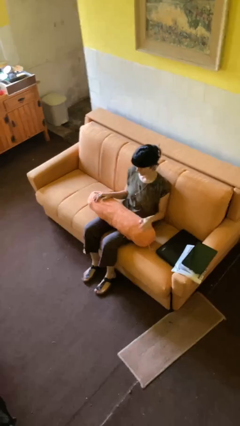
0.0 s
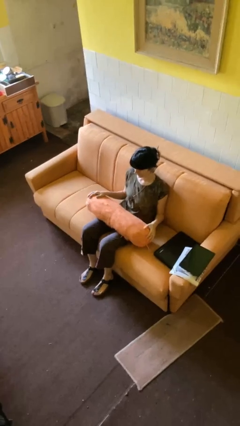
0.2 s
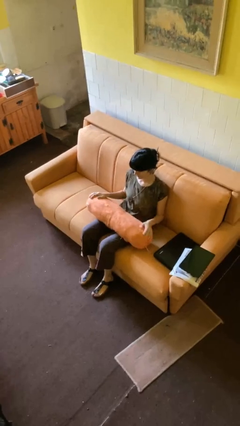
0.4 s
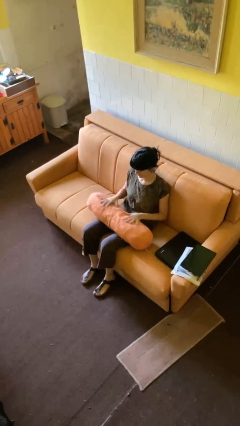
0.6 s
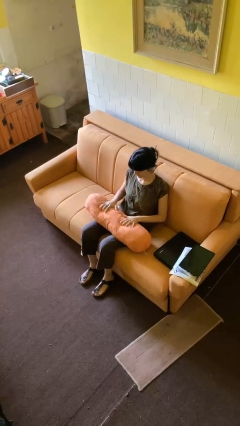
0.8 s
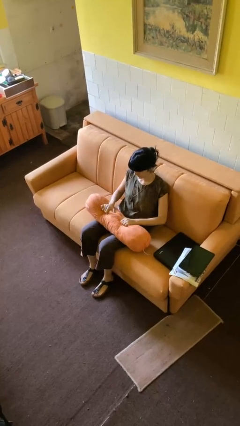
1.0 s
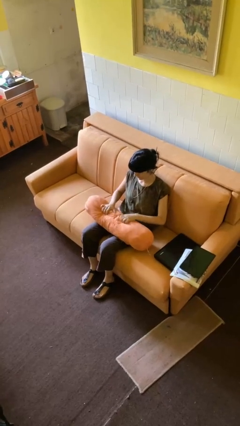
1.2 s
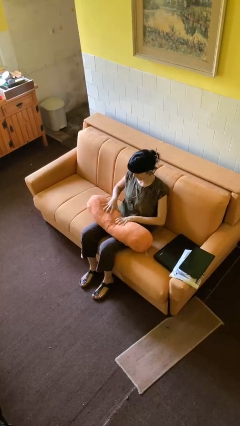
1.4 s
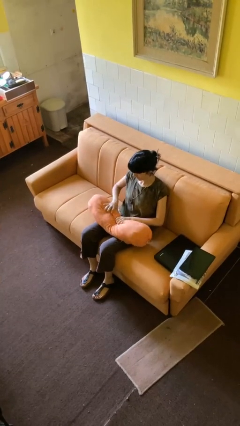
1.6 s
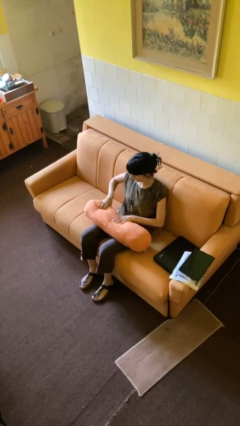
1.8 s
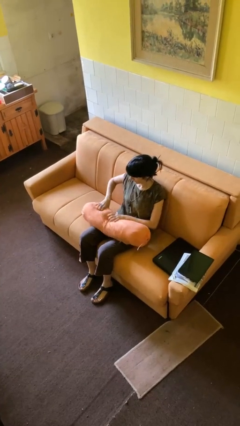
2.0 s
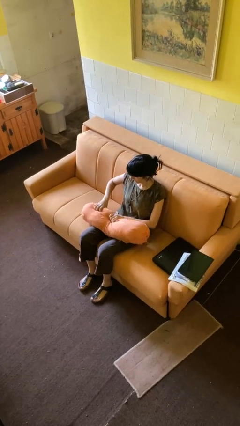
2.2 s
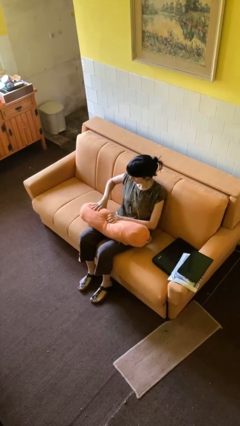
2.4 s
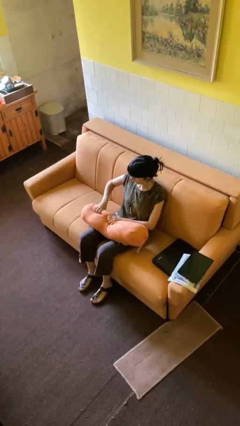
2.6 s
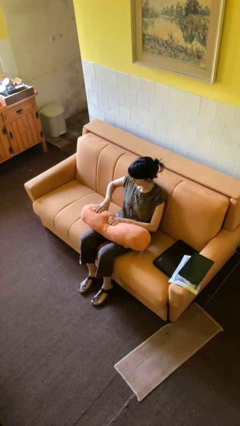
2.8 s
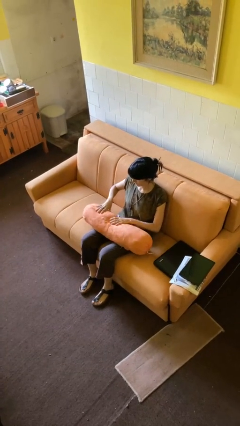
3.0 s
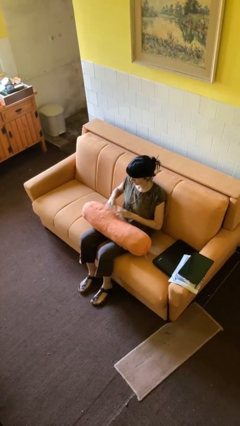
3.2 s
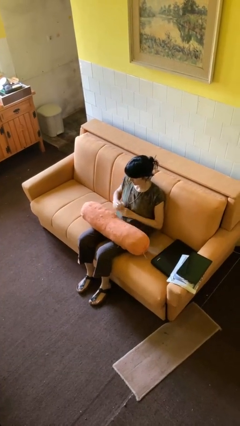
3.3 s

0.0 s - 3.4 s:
person squeezes object

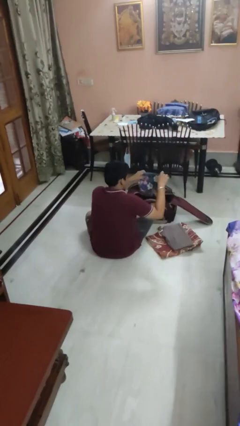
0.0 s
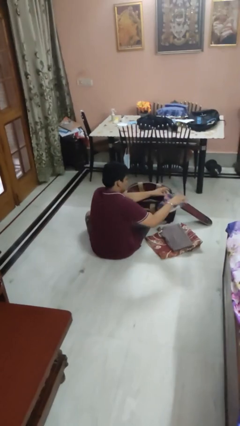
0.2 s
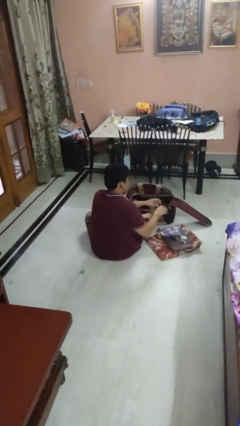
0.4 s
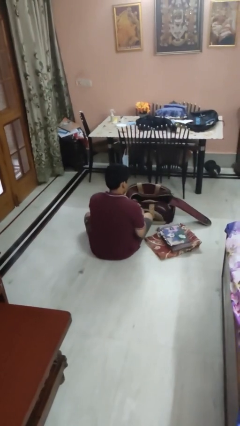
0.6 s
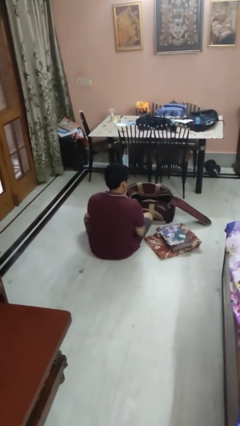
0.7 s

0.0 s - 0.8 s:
person unloads clothes from suitcase

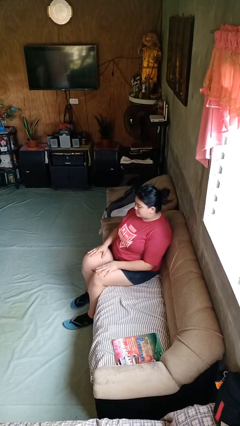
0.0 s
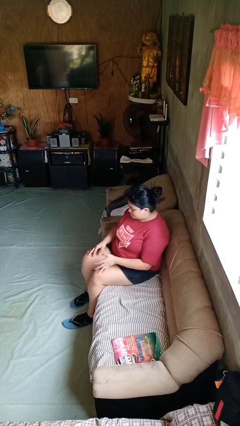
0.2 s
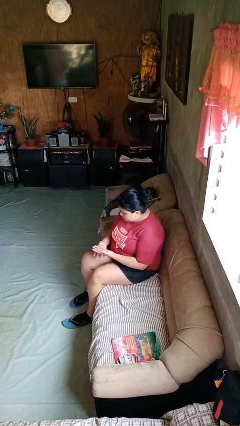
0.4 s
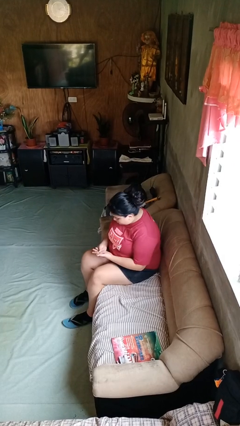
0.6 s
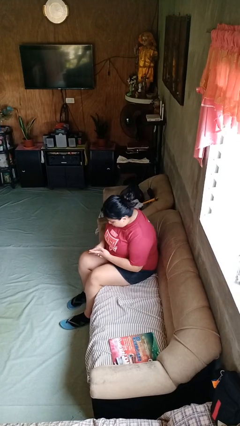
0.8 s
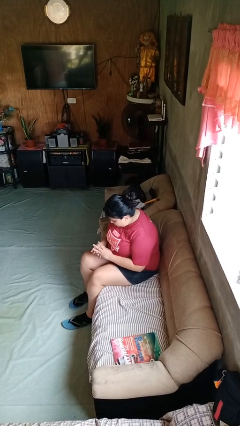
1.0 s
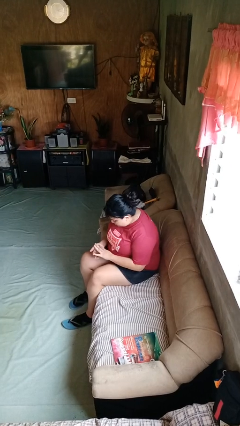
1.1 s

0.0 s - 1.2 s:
person looks at hands in lap

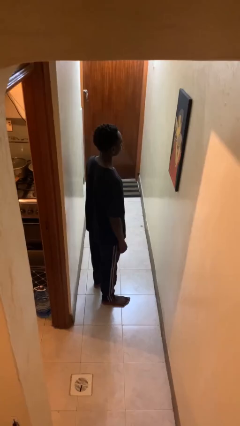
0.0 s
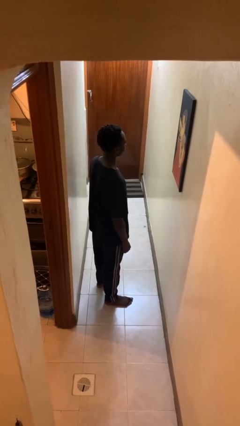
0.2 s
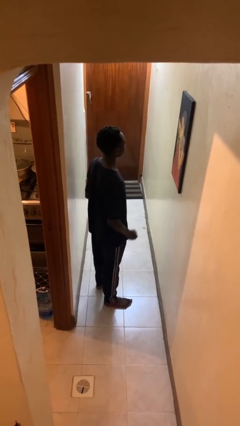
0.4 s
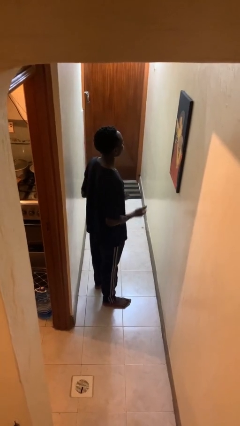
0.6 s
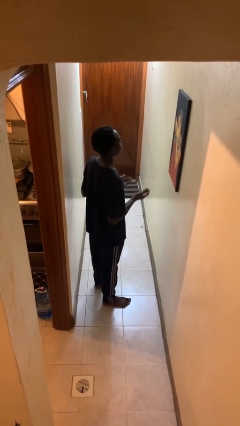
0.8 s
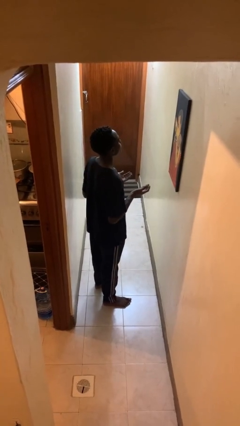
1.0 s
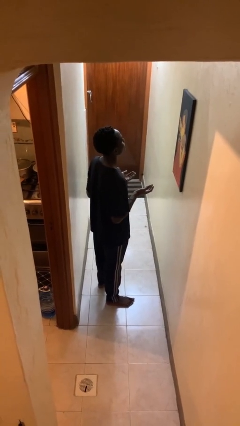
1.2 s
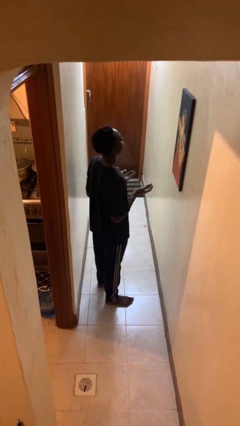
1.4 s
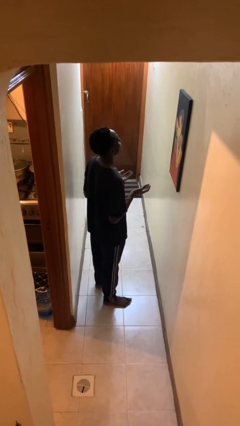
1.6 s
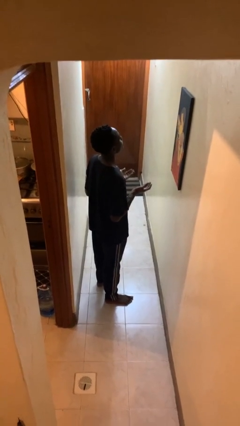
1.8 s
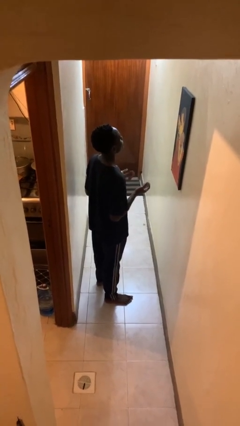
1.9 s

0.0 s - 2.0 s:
person prays

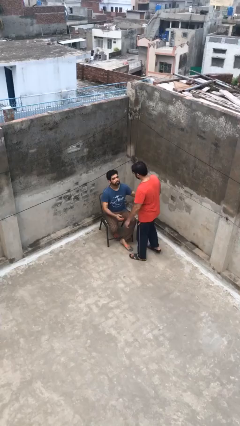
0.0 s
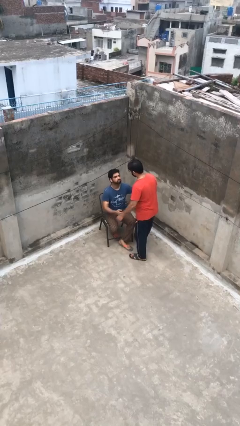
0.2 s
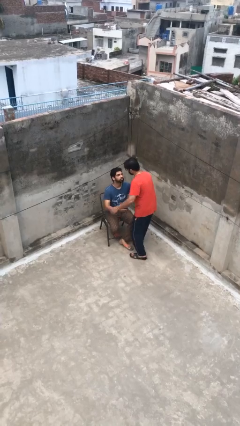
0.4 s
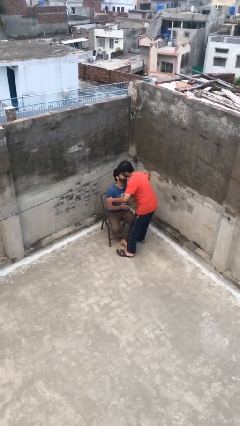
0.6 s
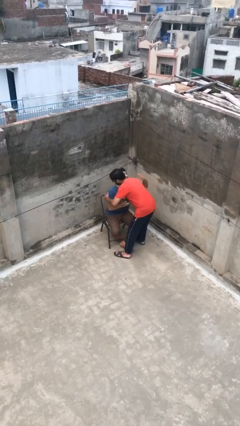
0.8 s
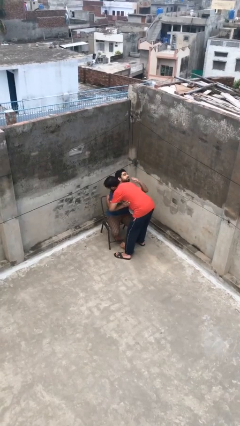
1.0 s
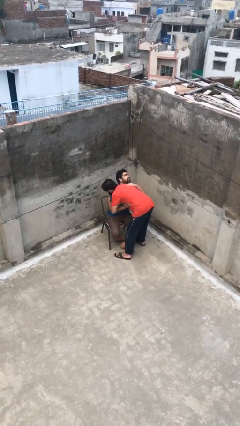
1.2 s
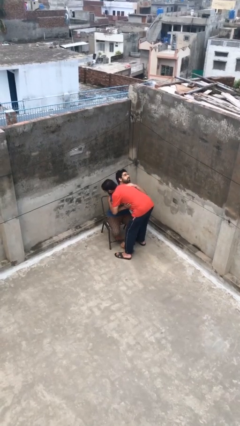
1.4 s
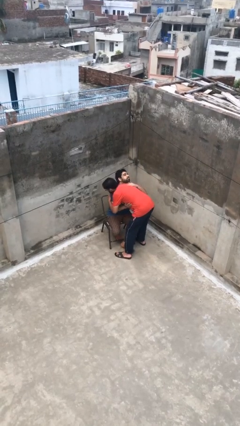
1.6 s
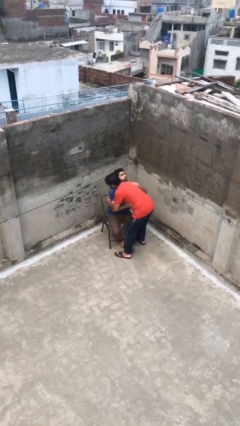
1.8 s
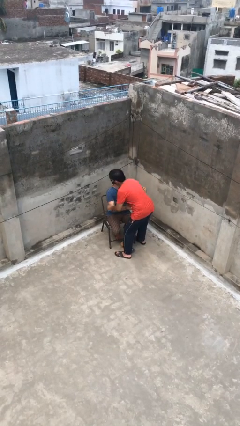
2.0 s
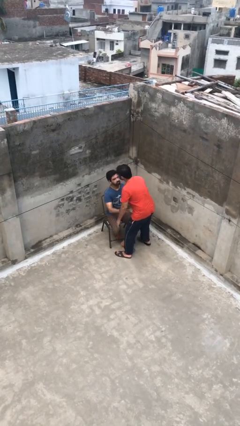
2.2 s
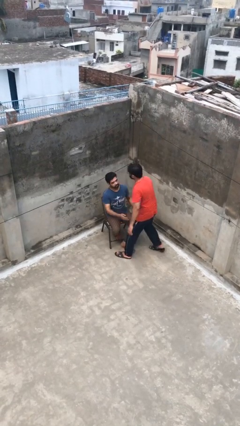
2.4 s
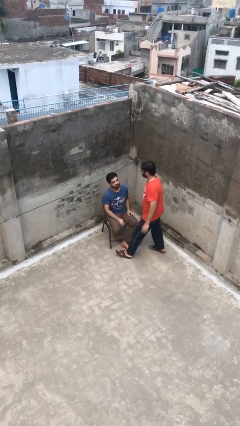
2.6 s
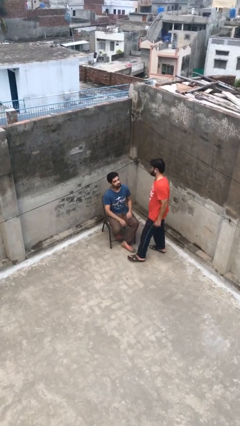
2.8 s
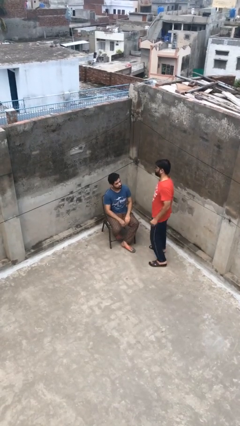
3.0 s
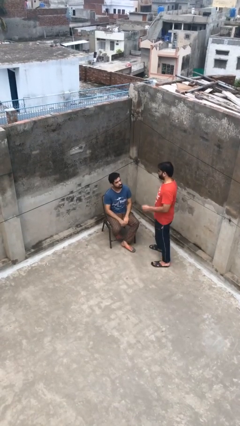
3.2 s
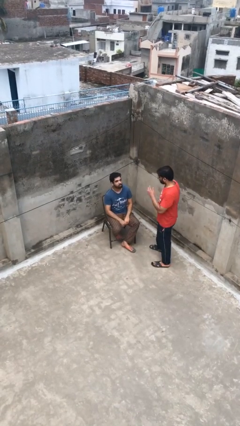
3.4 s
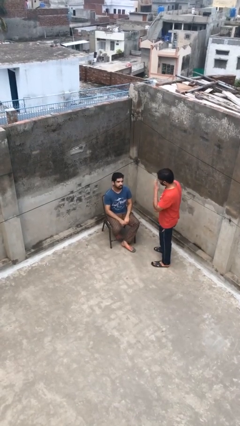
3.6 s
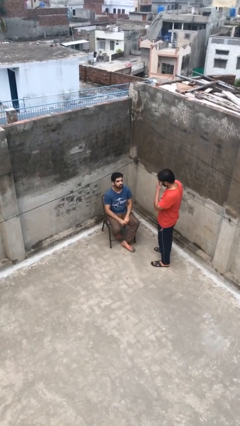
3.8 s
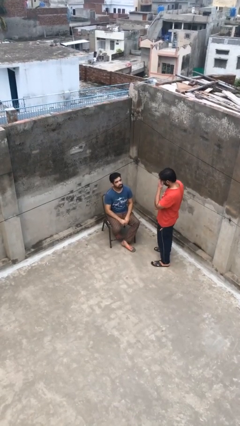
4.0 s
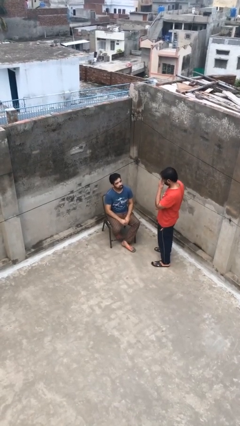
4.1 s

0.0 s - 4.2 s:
person embraces person

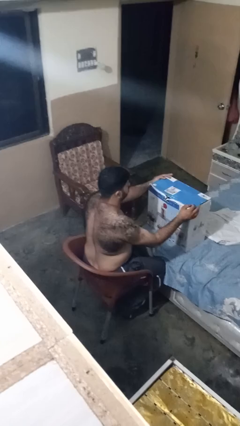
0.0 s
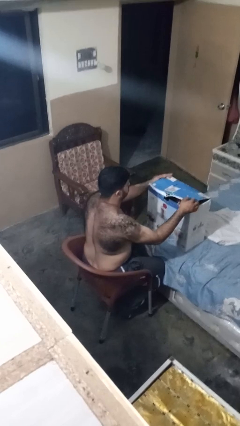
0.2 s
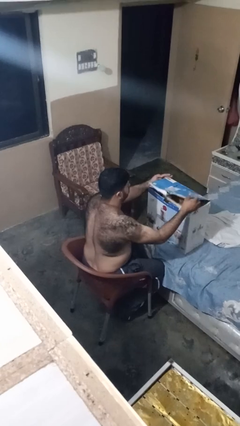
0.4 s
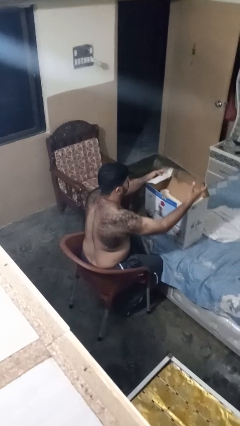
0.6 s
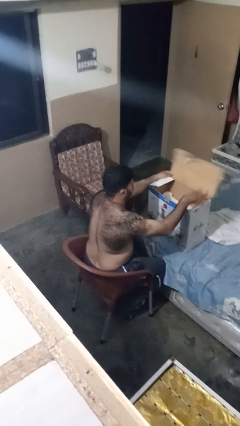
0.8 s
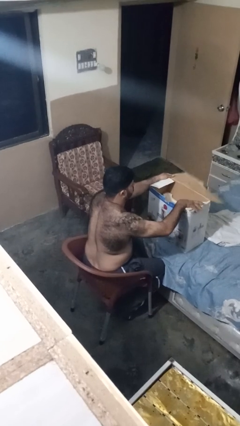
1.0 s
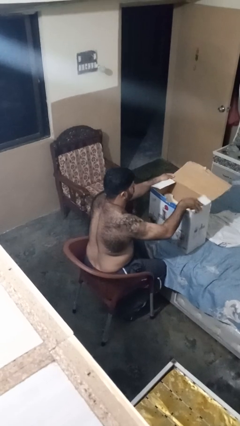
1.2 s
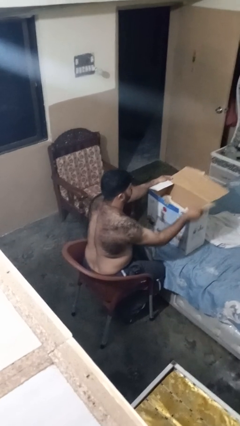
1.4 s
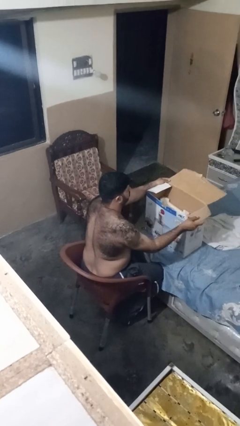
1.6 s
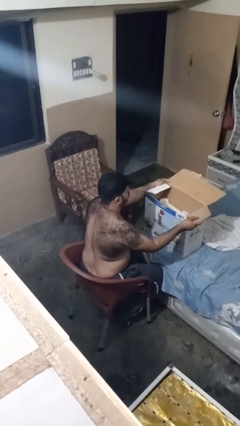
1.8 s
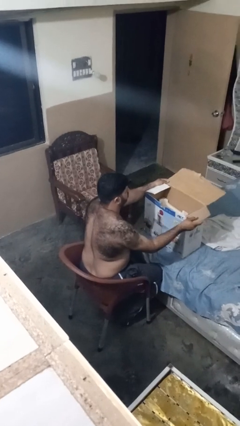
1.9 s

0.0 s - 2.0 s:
person opens box

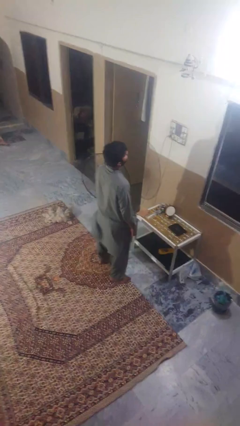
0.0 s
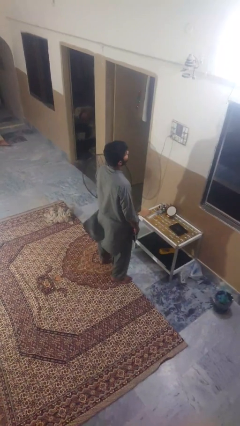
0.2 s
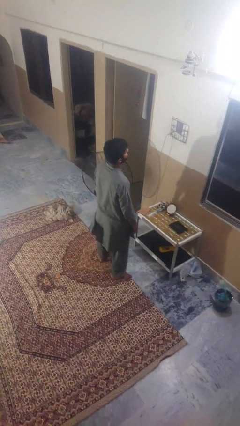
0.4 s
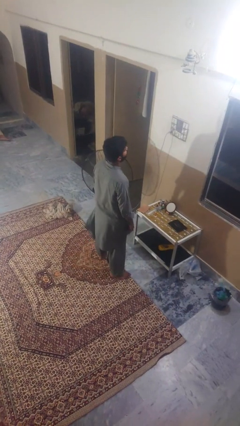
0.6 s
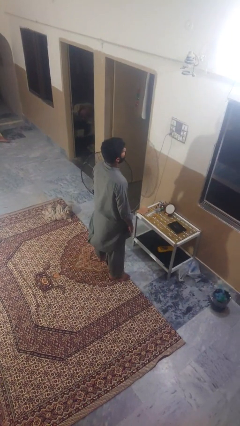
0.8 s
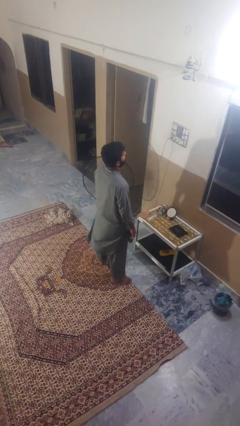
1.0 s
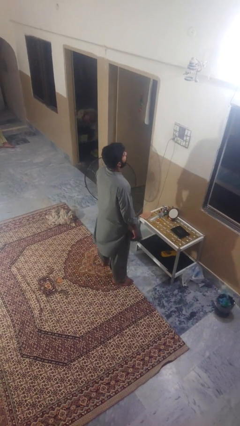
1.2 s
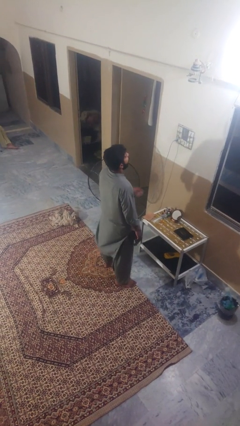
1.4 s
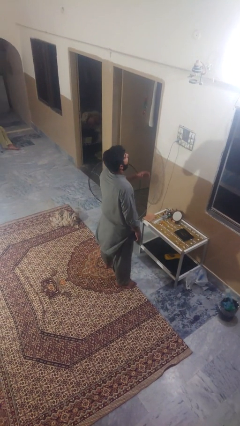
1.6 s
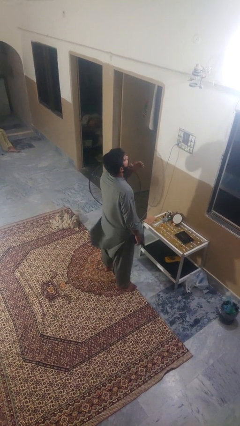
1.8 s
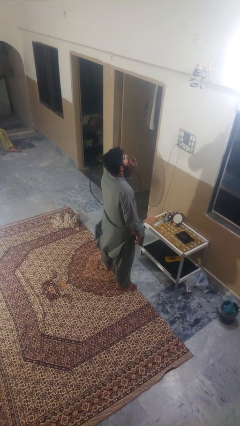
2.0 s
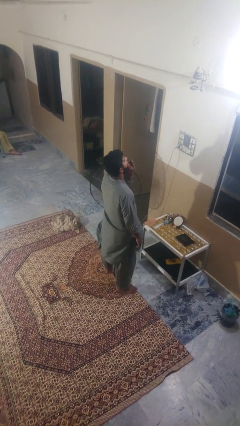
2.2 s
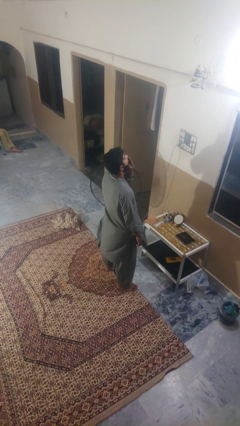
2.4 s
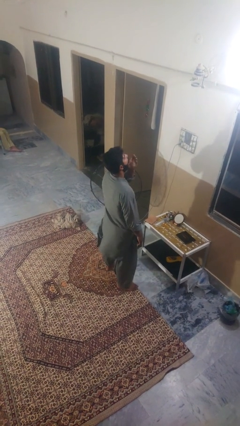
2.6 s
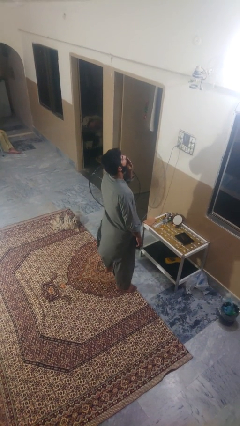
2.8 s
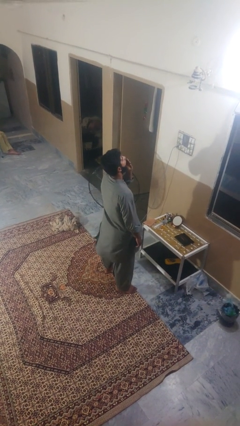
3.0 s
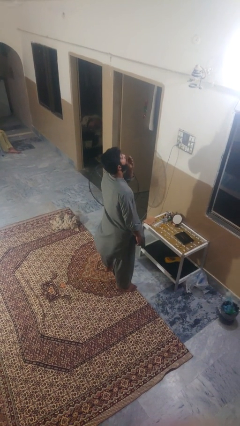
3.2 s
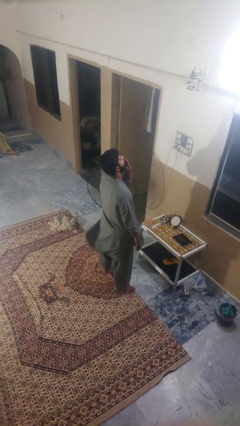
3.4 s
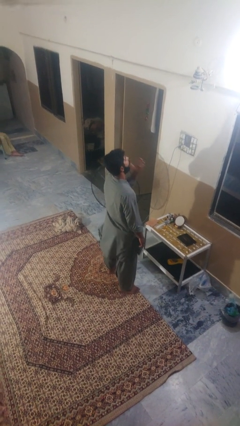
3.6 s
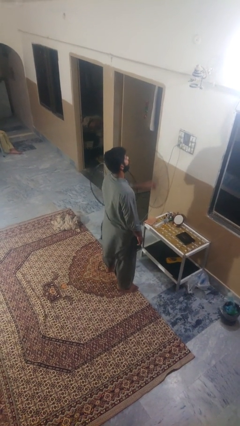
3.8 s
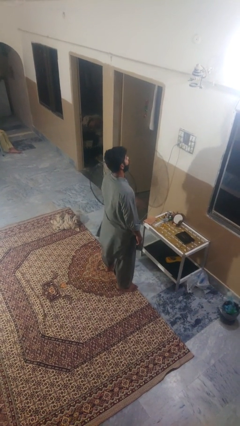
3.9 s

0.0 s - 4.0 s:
person yawns
